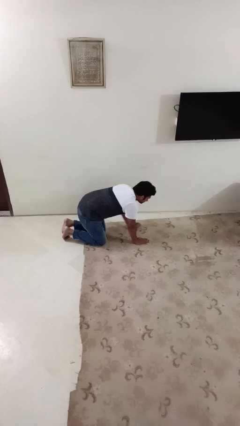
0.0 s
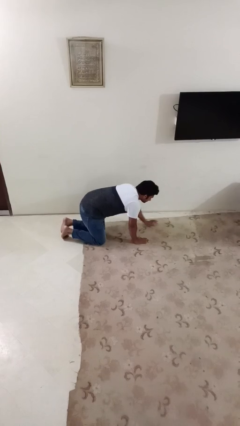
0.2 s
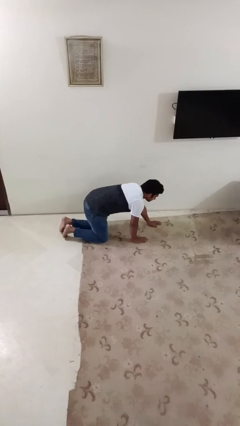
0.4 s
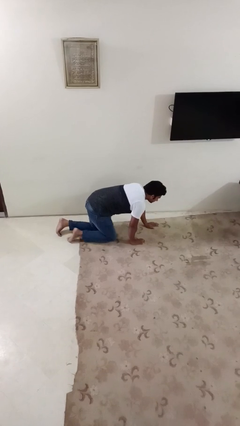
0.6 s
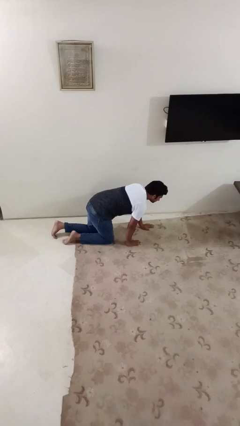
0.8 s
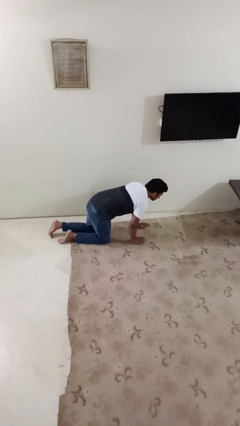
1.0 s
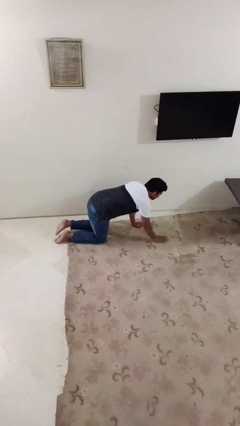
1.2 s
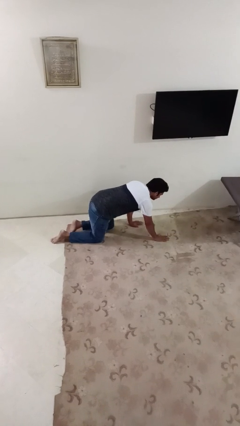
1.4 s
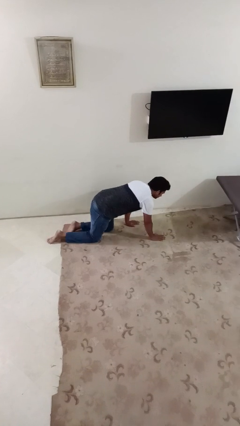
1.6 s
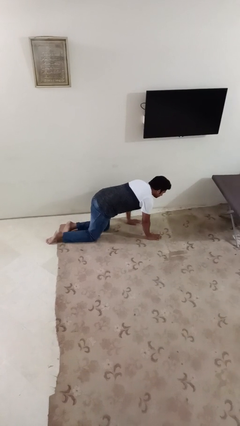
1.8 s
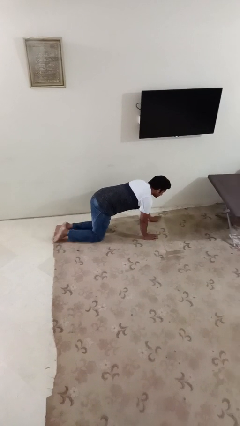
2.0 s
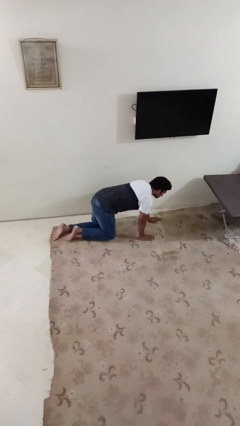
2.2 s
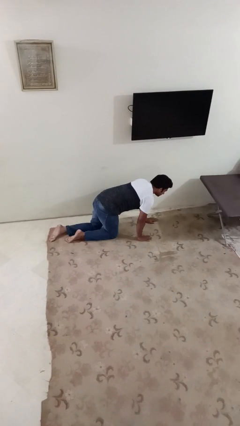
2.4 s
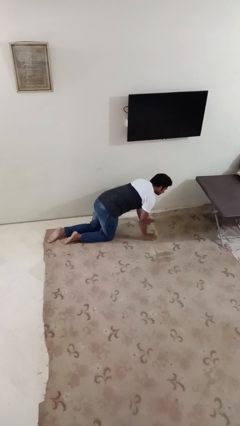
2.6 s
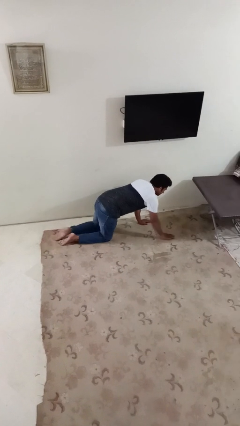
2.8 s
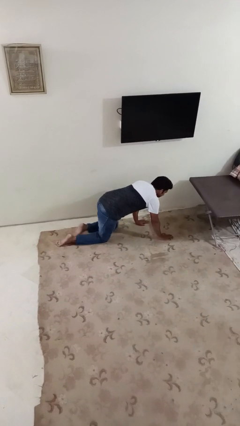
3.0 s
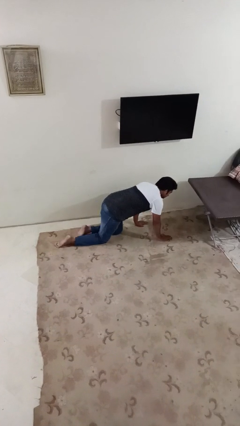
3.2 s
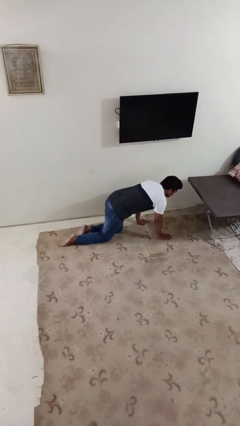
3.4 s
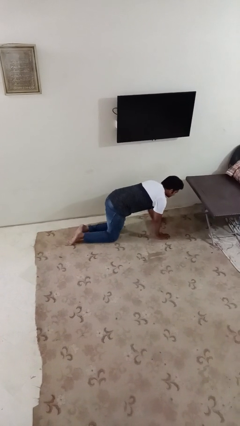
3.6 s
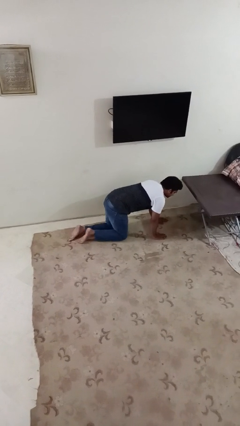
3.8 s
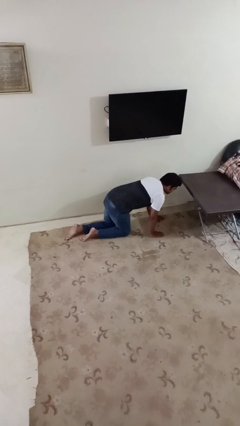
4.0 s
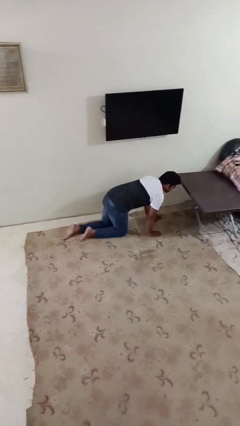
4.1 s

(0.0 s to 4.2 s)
person crawls

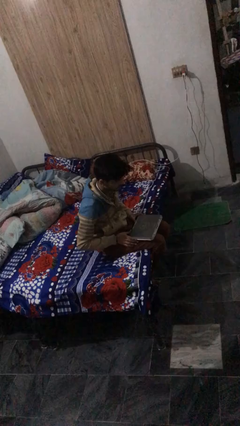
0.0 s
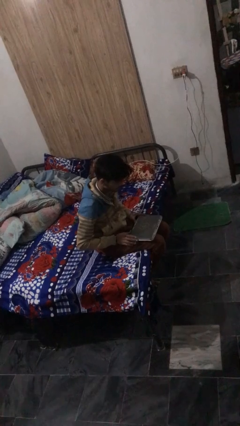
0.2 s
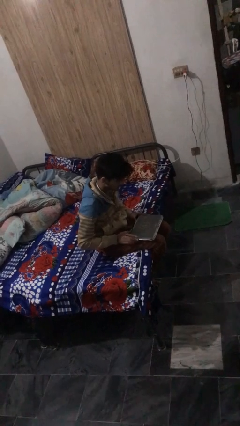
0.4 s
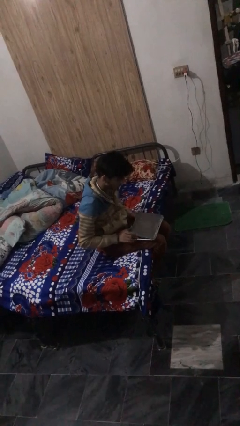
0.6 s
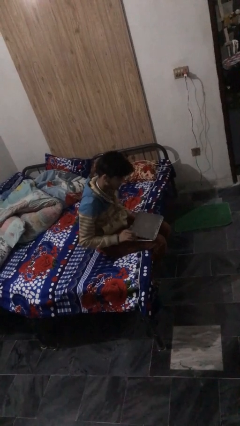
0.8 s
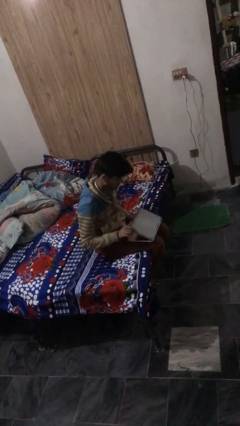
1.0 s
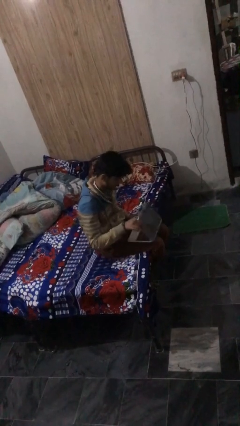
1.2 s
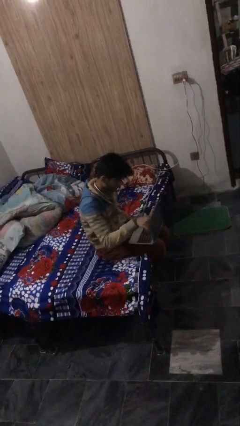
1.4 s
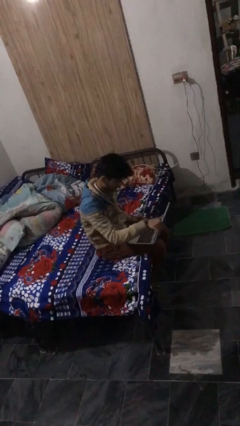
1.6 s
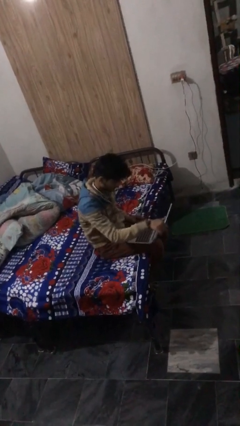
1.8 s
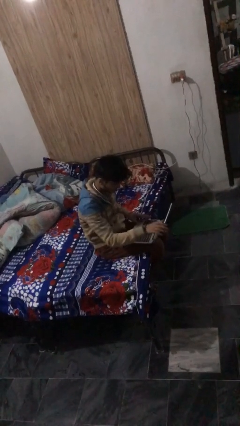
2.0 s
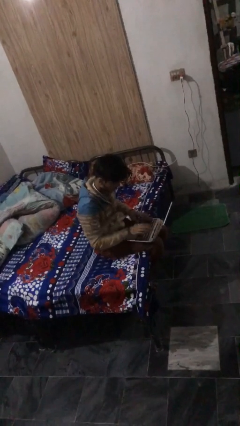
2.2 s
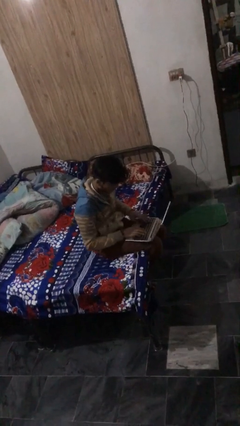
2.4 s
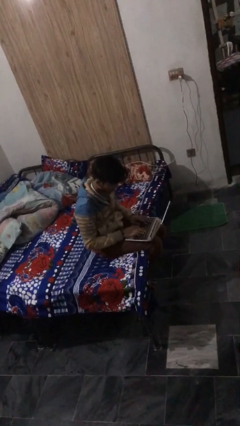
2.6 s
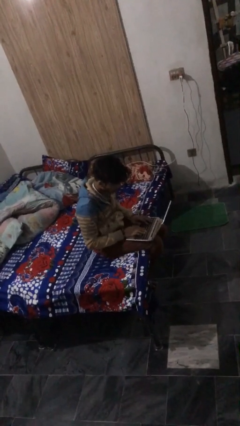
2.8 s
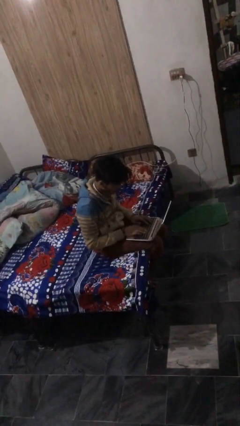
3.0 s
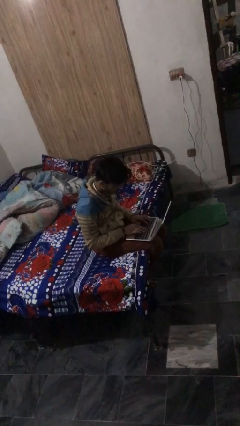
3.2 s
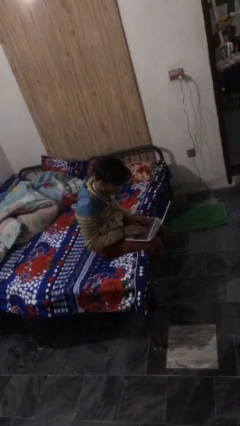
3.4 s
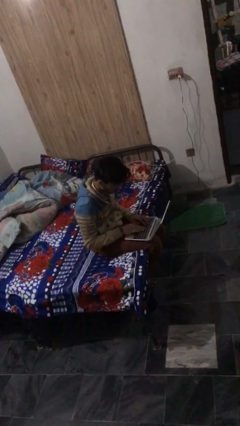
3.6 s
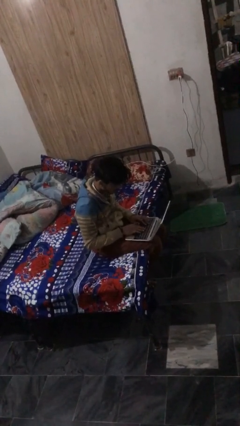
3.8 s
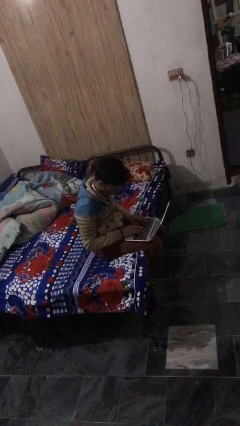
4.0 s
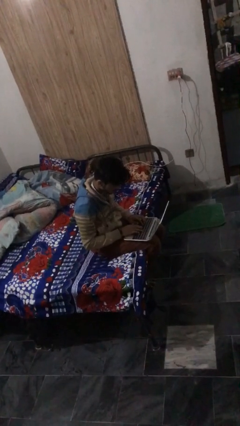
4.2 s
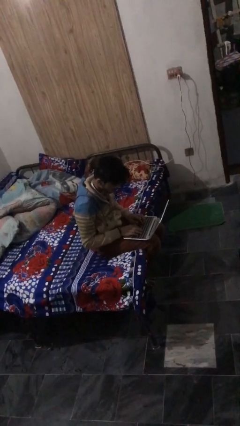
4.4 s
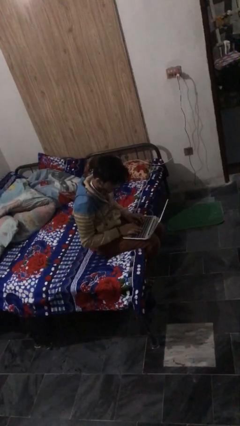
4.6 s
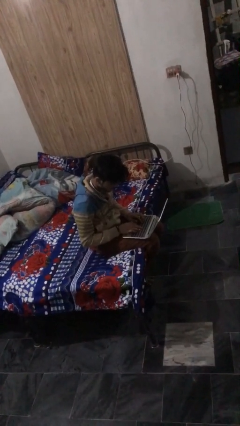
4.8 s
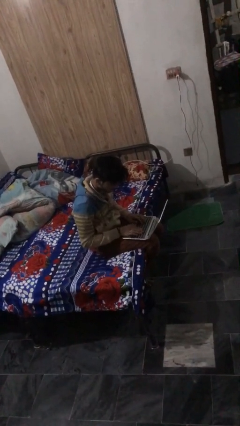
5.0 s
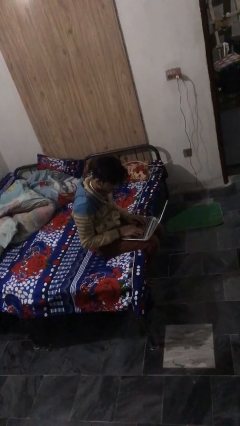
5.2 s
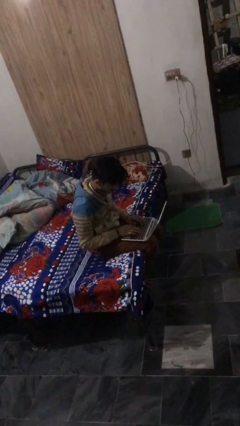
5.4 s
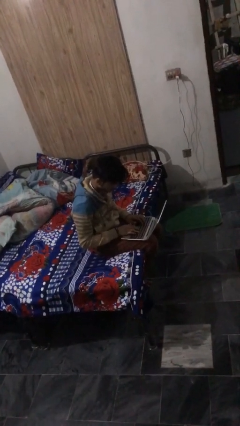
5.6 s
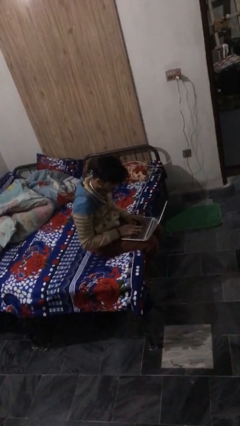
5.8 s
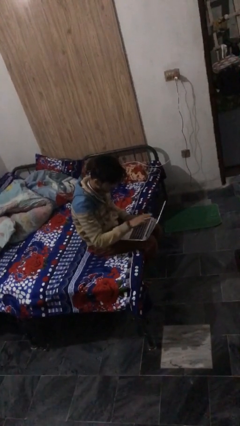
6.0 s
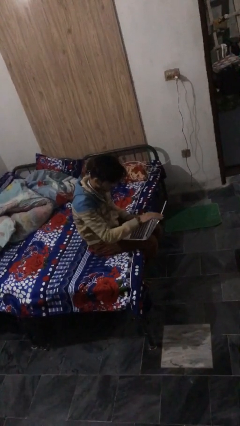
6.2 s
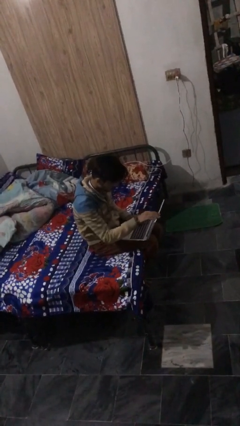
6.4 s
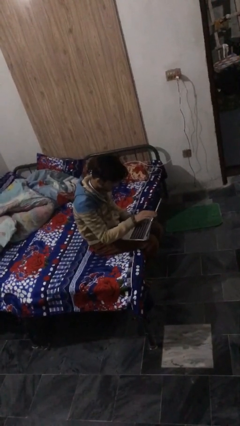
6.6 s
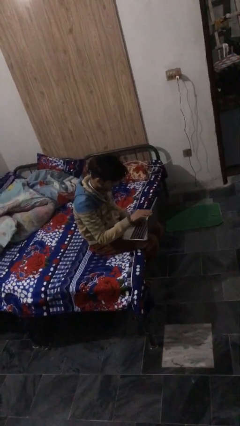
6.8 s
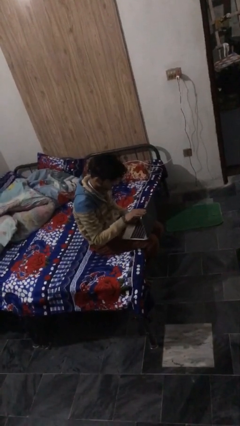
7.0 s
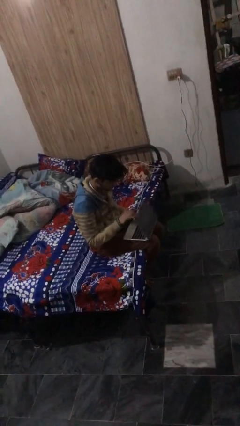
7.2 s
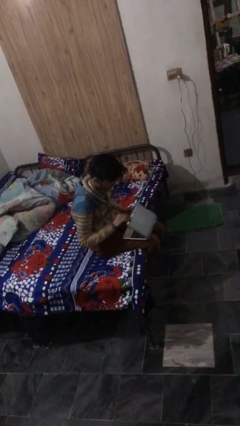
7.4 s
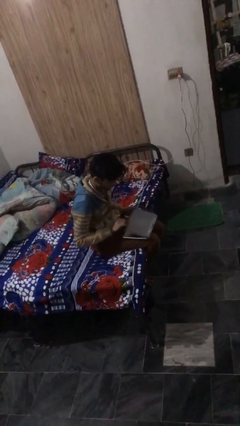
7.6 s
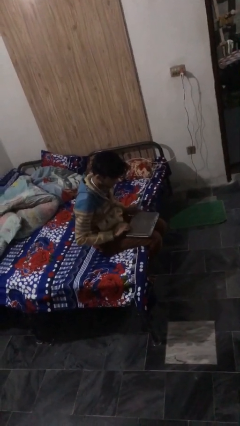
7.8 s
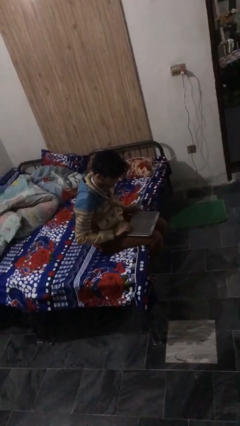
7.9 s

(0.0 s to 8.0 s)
person interacts with laptop

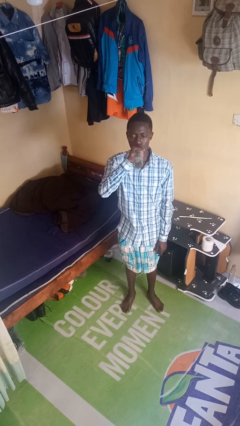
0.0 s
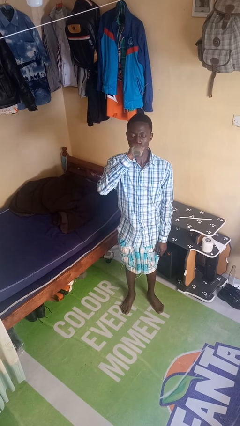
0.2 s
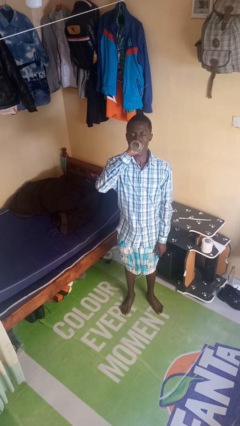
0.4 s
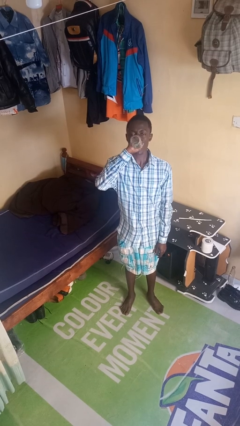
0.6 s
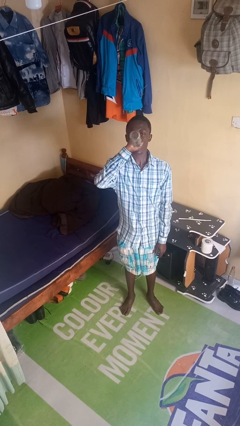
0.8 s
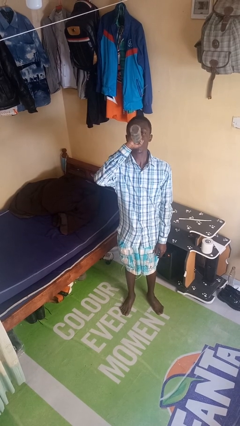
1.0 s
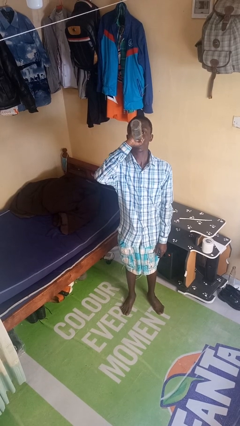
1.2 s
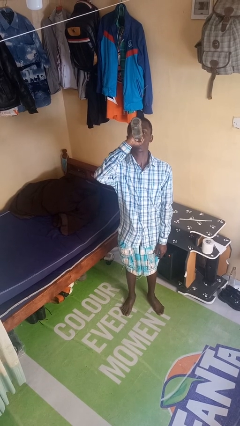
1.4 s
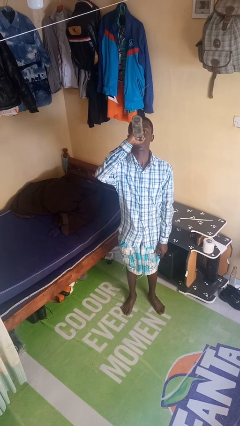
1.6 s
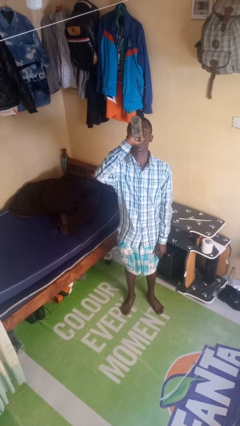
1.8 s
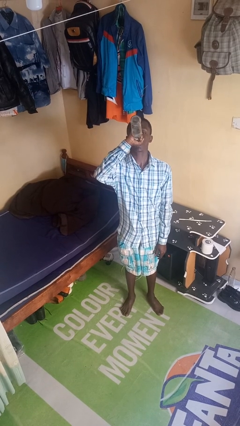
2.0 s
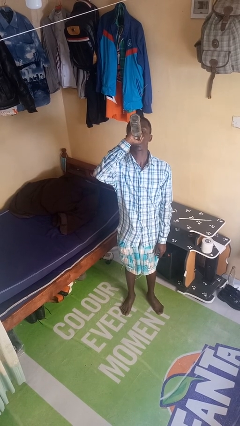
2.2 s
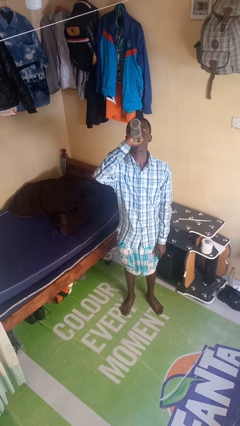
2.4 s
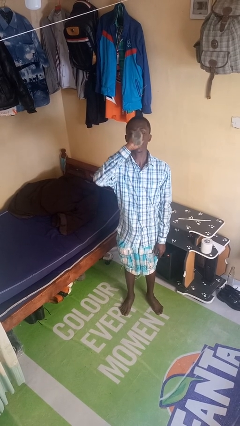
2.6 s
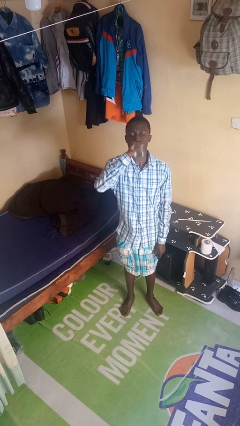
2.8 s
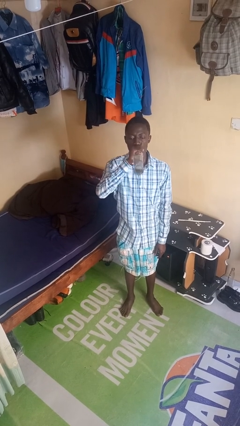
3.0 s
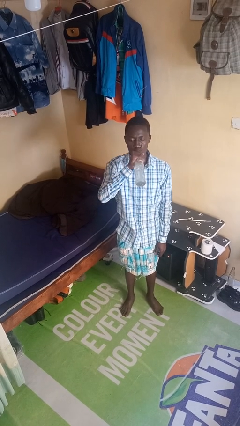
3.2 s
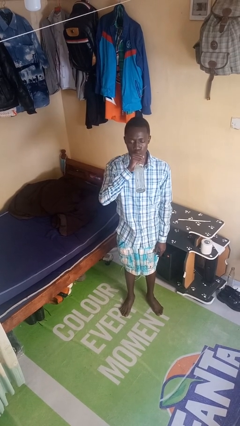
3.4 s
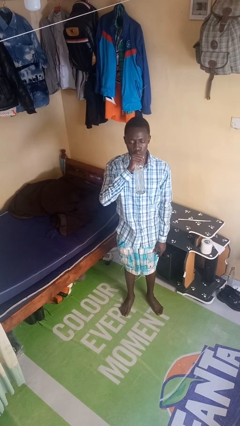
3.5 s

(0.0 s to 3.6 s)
person drinks from bottle

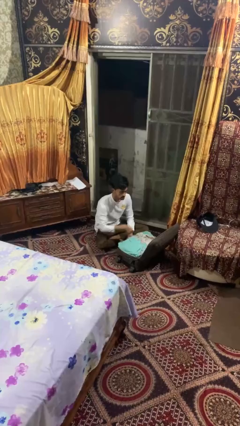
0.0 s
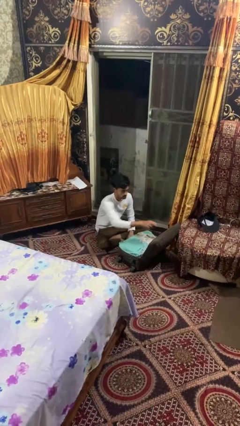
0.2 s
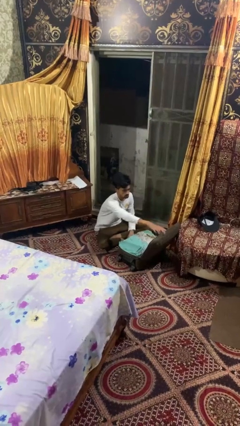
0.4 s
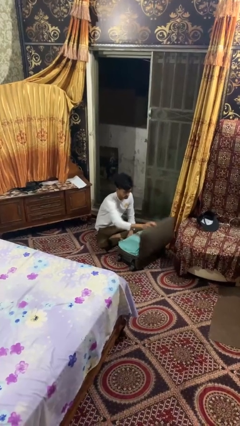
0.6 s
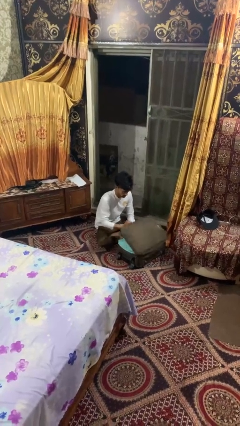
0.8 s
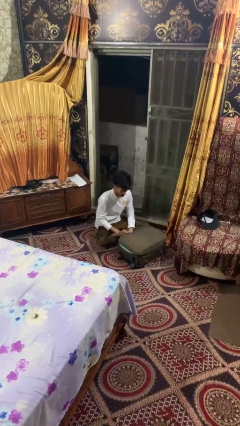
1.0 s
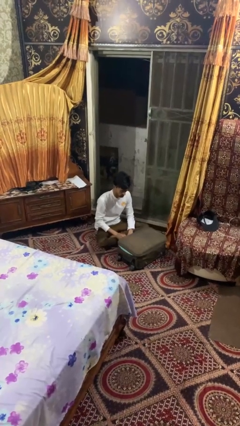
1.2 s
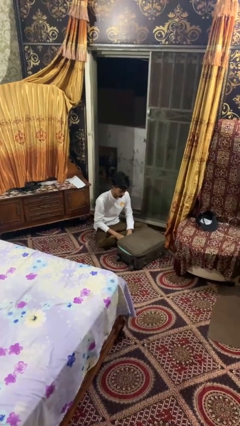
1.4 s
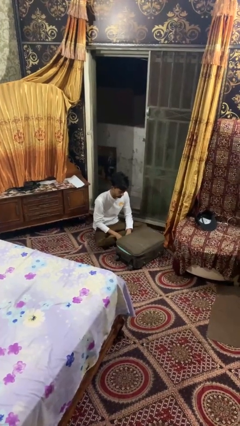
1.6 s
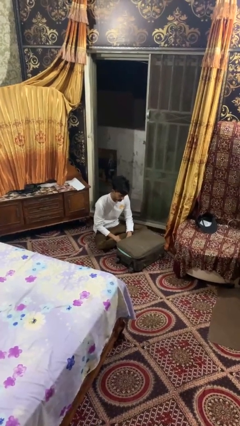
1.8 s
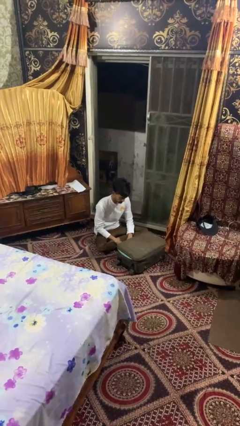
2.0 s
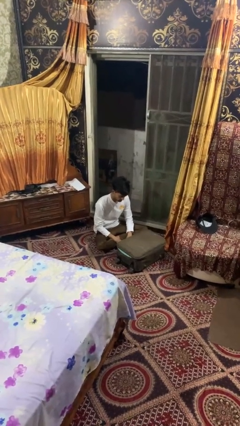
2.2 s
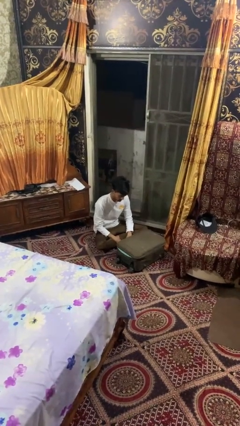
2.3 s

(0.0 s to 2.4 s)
person closes suitcase
